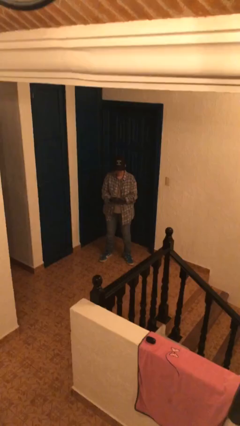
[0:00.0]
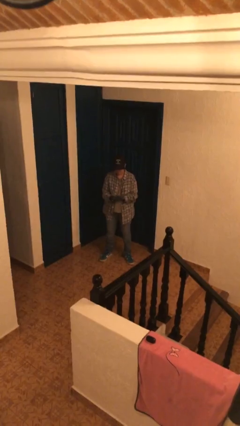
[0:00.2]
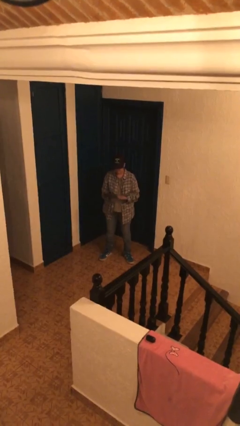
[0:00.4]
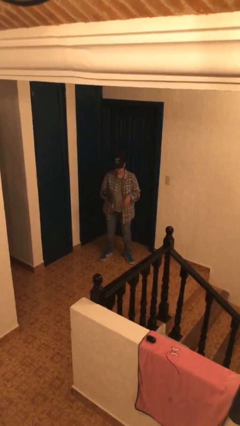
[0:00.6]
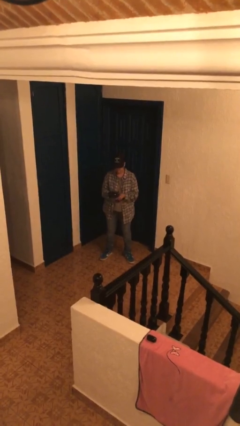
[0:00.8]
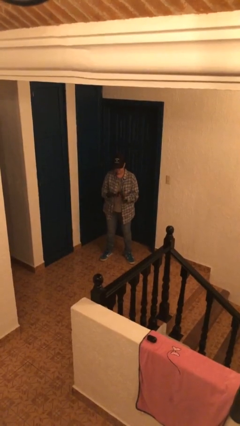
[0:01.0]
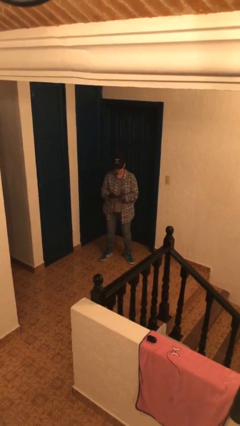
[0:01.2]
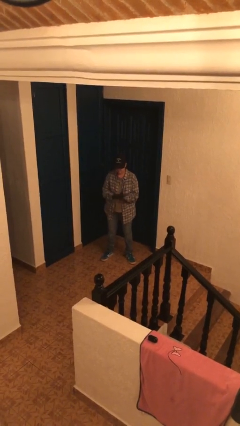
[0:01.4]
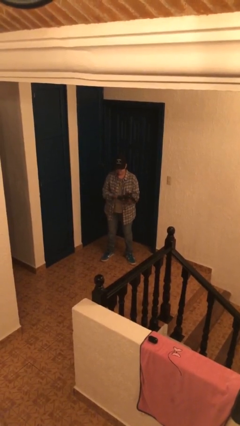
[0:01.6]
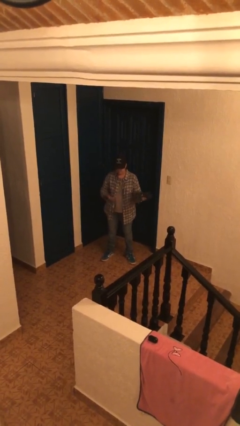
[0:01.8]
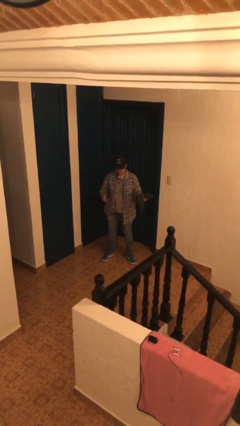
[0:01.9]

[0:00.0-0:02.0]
person takes off gloves

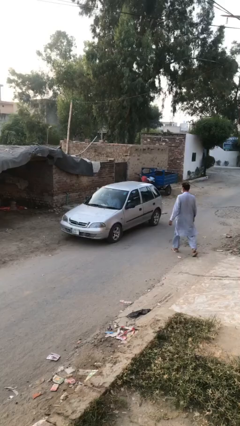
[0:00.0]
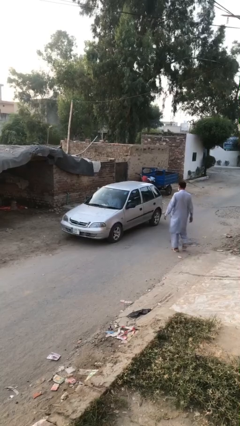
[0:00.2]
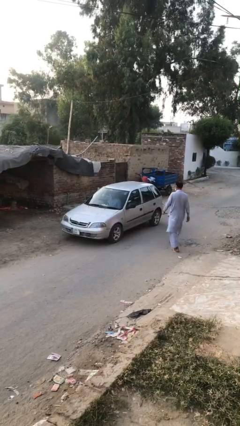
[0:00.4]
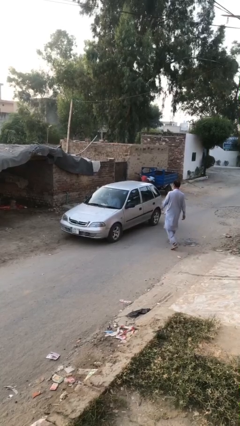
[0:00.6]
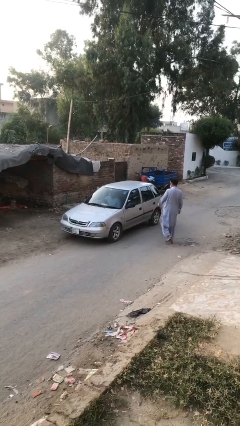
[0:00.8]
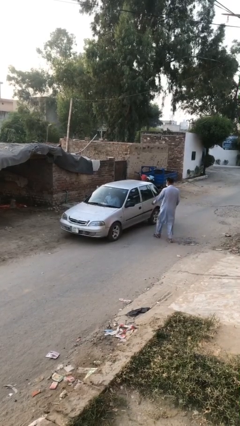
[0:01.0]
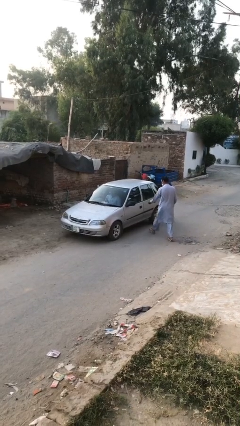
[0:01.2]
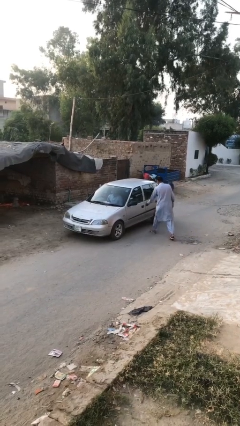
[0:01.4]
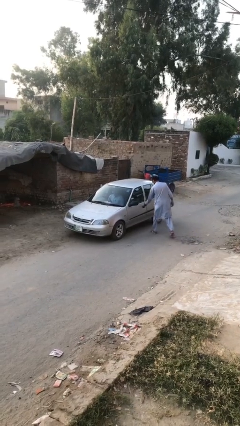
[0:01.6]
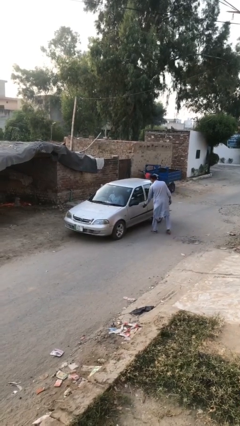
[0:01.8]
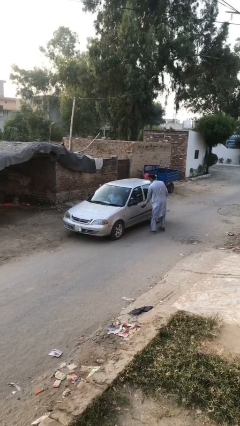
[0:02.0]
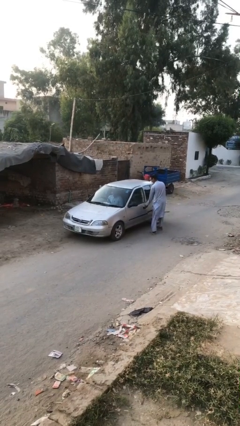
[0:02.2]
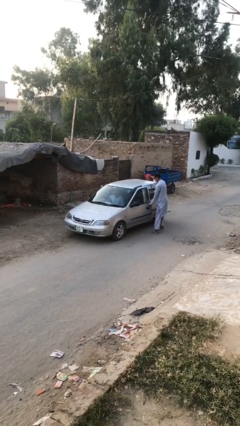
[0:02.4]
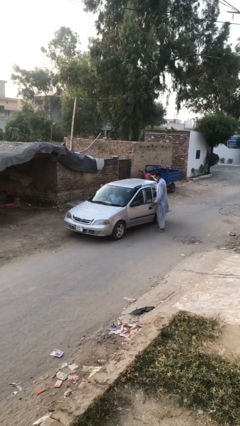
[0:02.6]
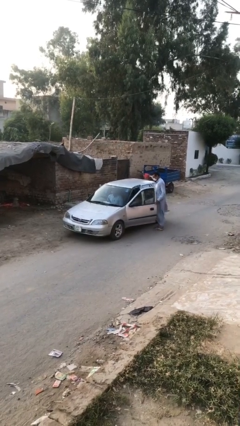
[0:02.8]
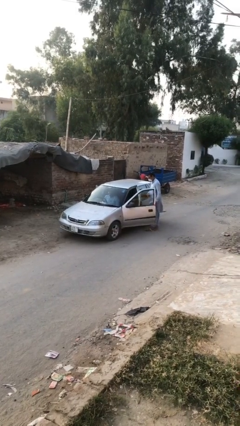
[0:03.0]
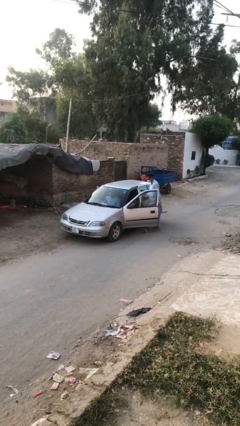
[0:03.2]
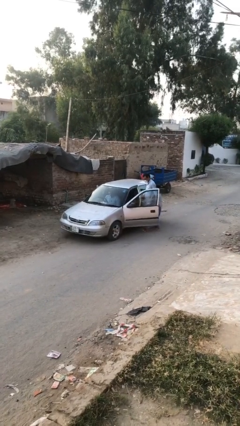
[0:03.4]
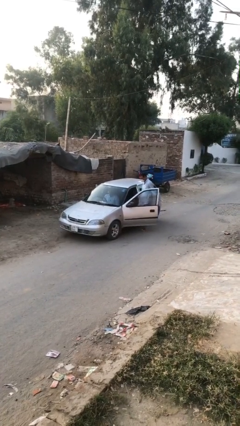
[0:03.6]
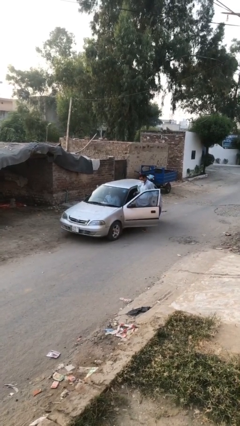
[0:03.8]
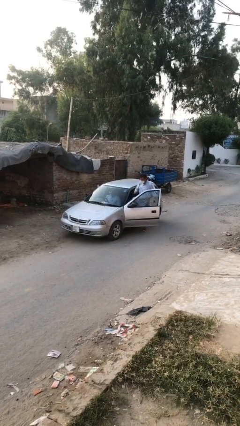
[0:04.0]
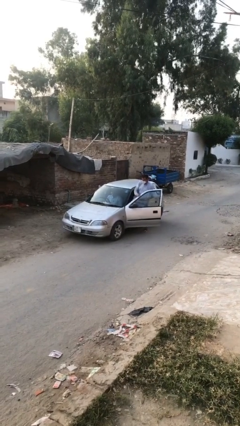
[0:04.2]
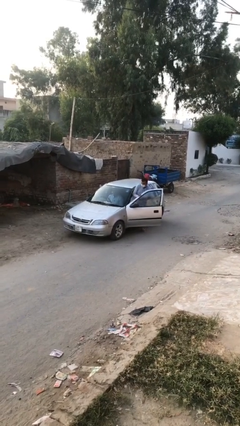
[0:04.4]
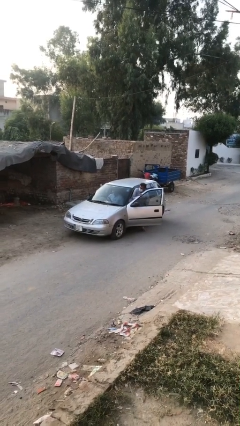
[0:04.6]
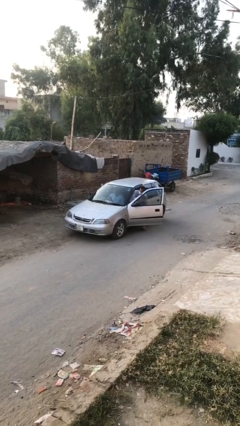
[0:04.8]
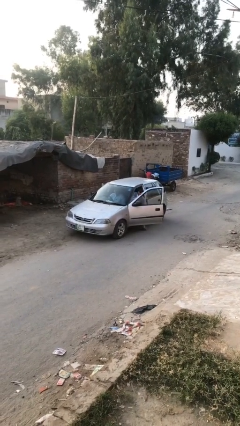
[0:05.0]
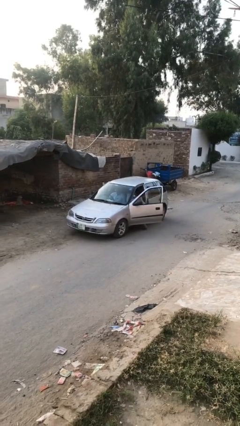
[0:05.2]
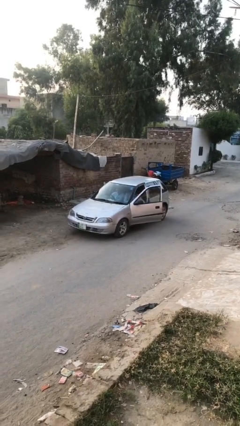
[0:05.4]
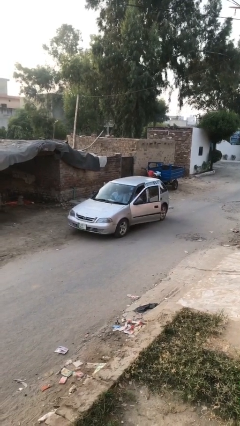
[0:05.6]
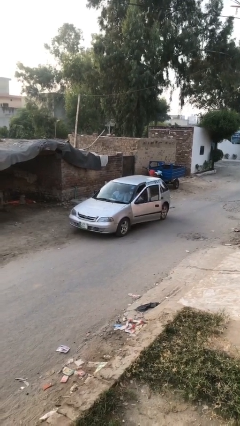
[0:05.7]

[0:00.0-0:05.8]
car picks up person

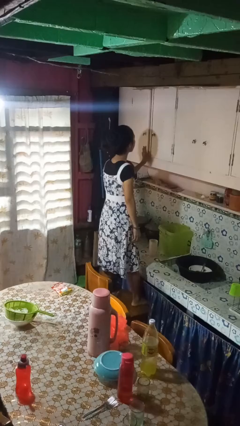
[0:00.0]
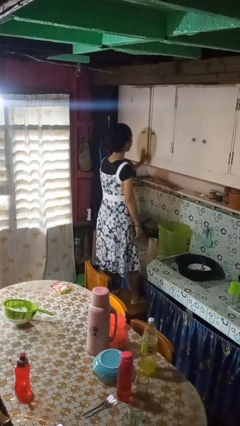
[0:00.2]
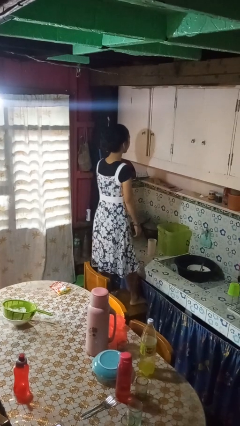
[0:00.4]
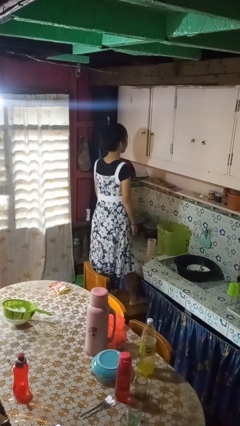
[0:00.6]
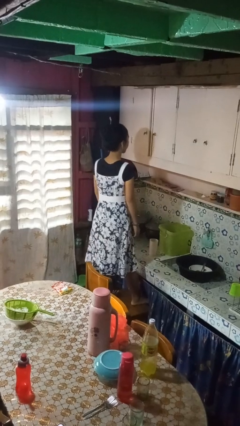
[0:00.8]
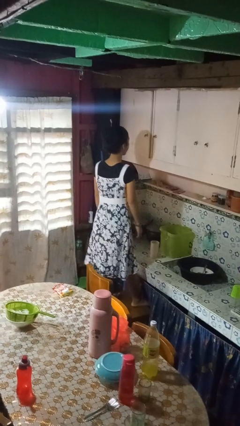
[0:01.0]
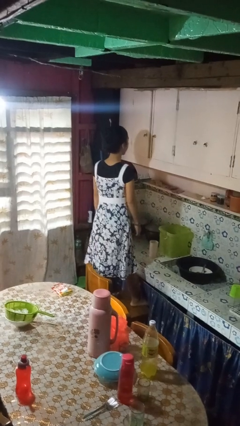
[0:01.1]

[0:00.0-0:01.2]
person closes cabinet

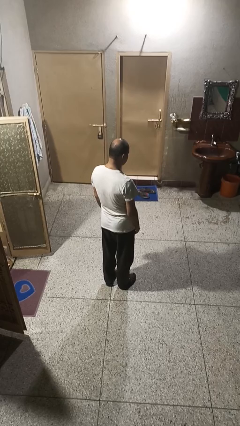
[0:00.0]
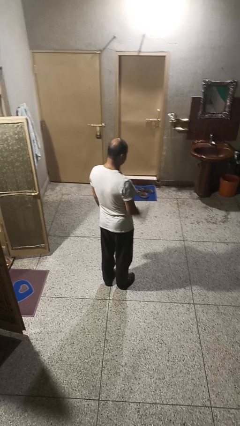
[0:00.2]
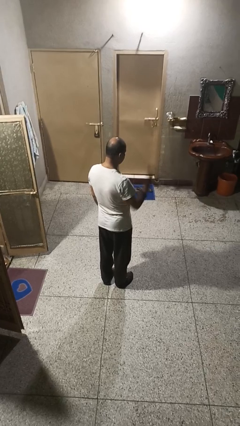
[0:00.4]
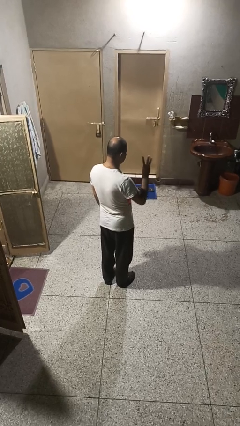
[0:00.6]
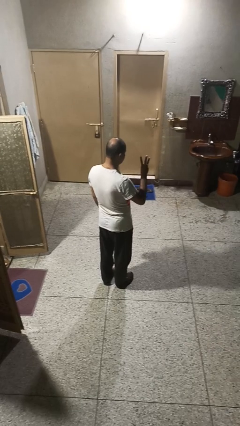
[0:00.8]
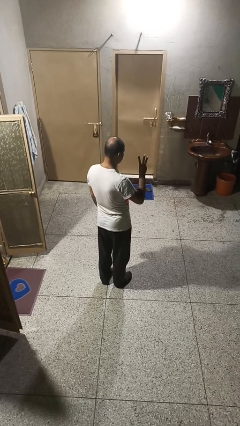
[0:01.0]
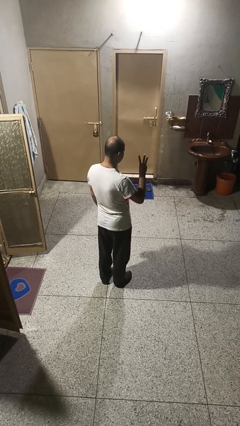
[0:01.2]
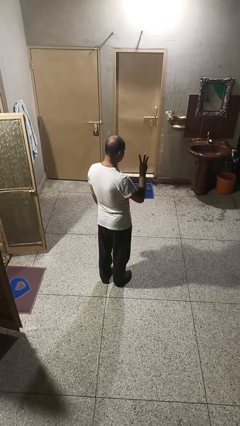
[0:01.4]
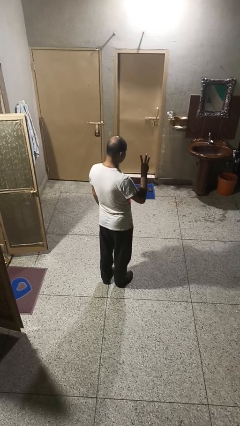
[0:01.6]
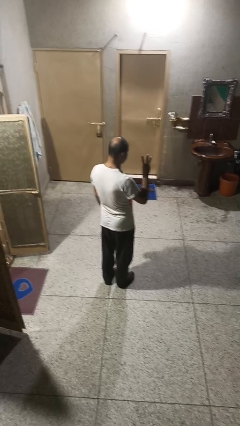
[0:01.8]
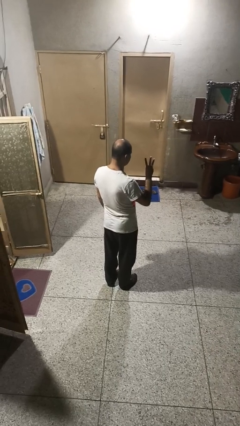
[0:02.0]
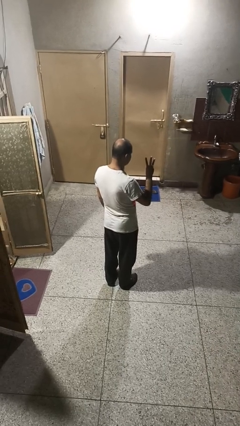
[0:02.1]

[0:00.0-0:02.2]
person gestures number three

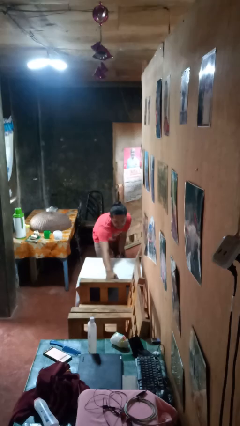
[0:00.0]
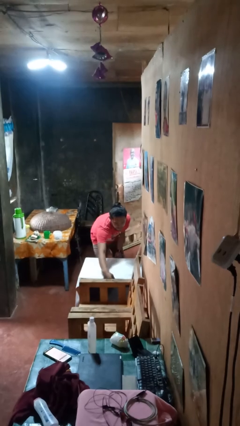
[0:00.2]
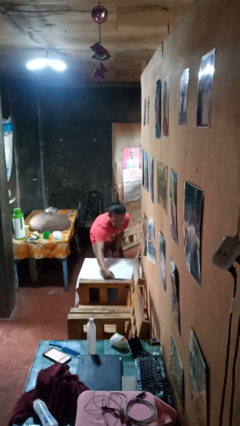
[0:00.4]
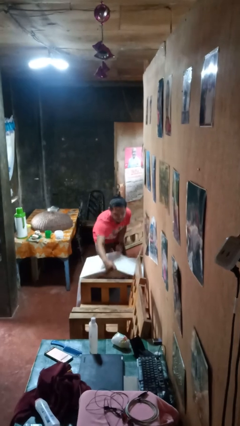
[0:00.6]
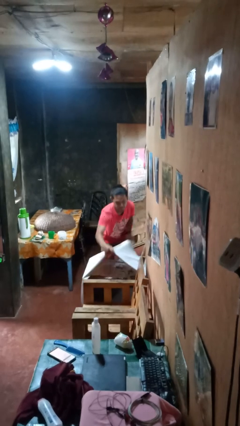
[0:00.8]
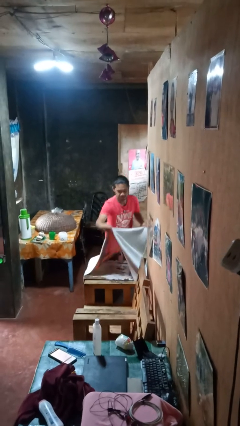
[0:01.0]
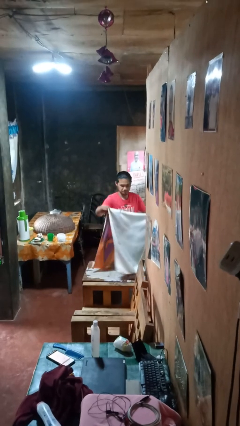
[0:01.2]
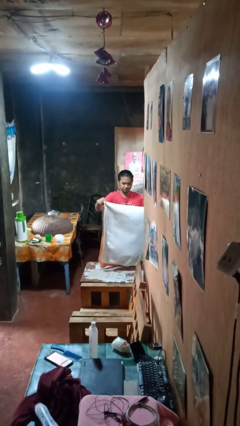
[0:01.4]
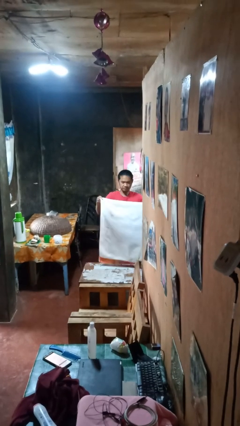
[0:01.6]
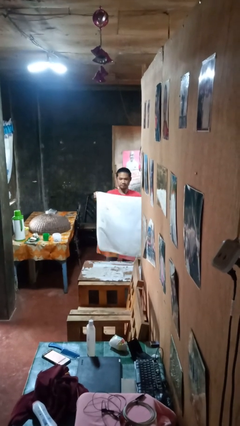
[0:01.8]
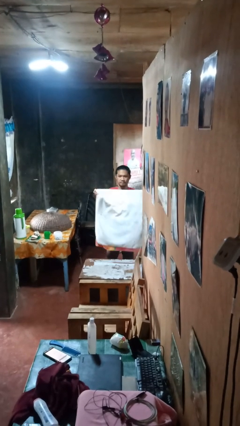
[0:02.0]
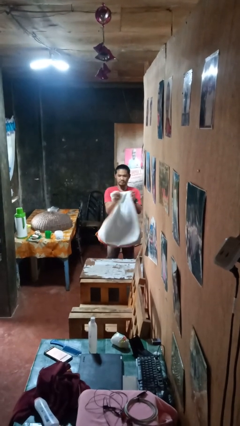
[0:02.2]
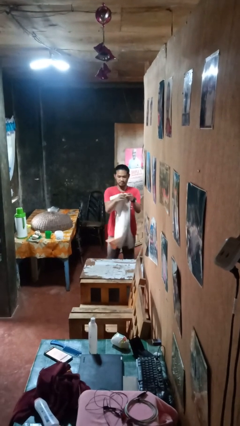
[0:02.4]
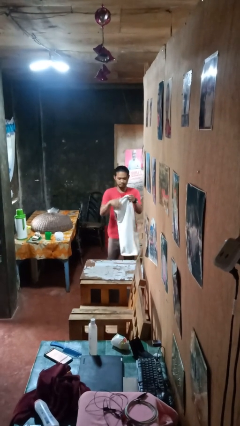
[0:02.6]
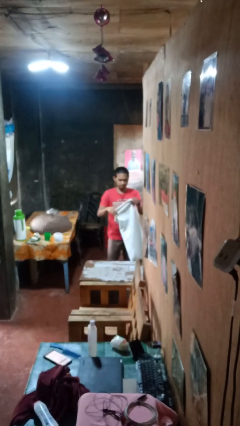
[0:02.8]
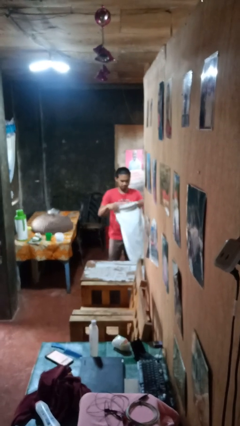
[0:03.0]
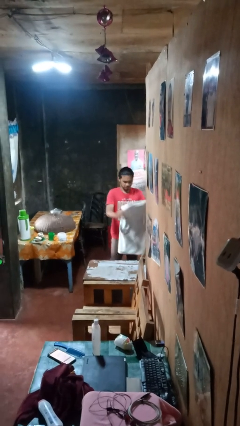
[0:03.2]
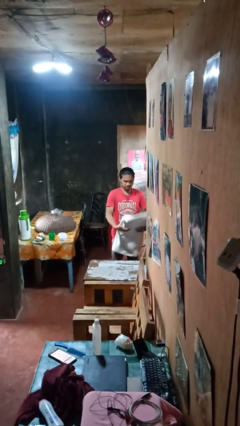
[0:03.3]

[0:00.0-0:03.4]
person folds tablecloth

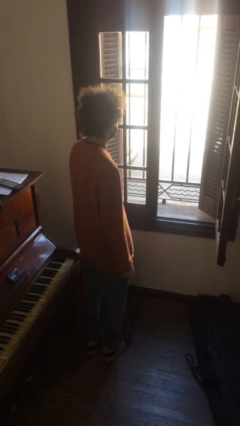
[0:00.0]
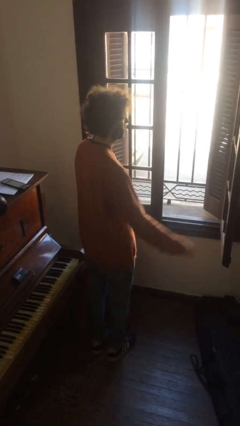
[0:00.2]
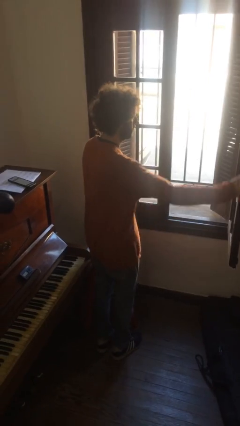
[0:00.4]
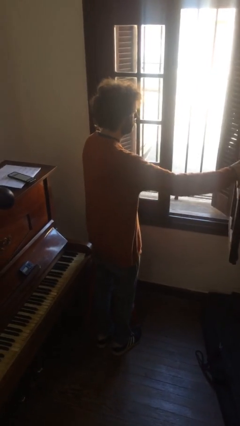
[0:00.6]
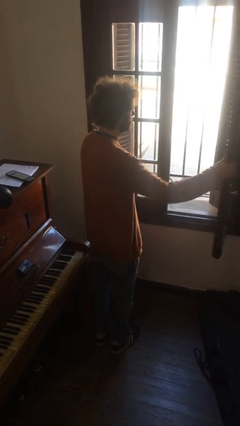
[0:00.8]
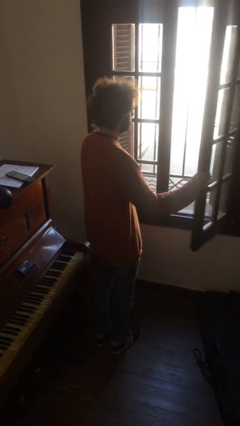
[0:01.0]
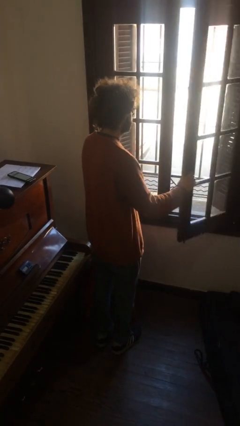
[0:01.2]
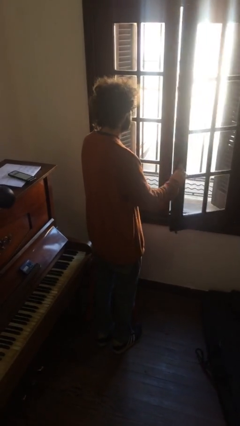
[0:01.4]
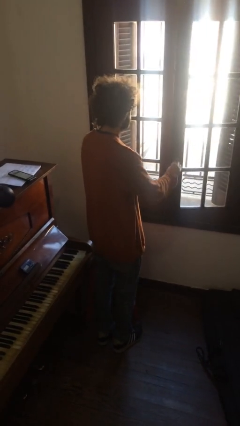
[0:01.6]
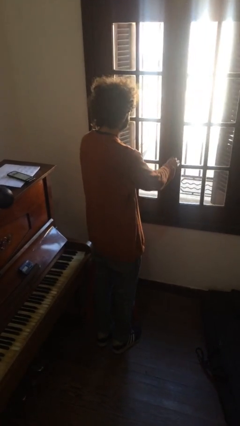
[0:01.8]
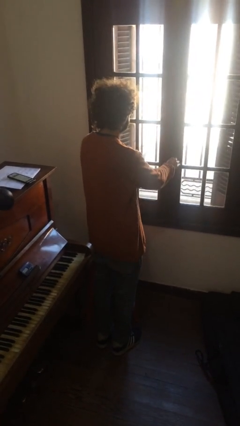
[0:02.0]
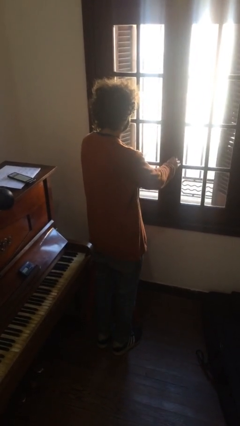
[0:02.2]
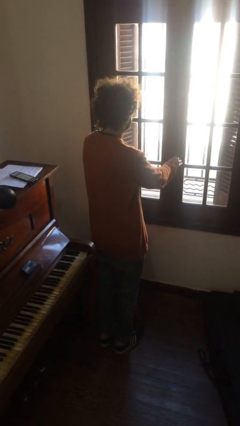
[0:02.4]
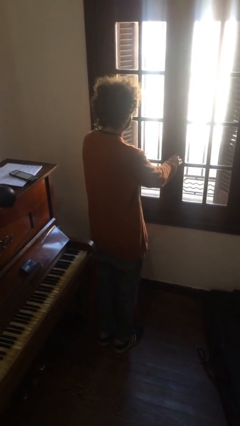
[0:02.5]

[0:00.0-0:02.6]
person closes home window

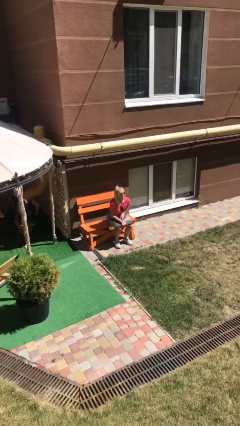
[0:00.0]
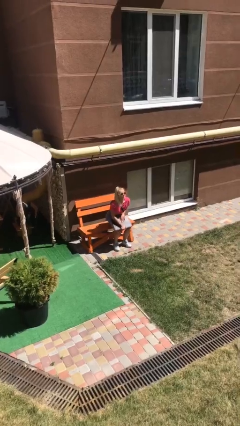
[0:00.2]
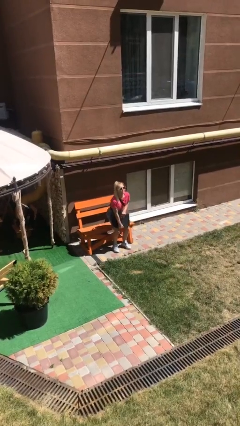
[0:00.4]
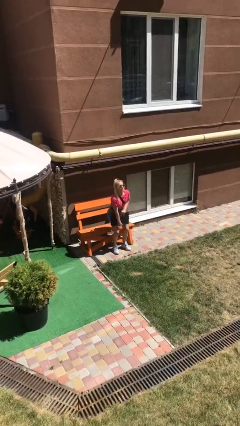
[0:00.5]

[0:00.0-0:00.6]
person stands up
